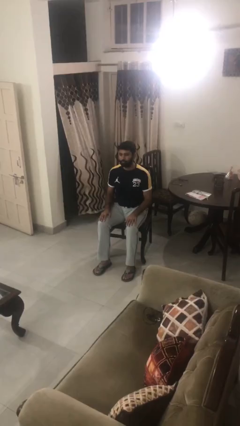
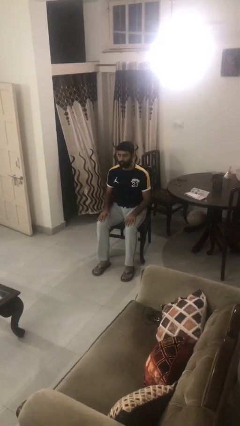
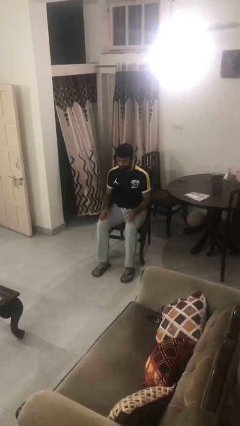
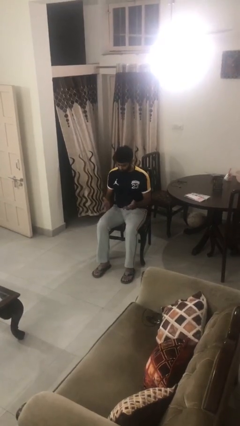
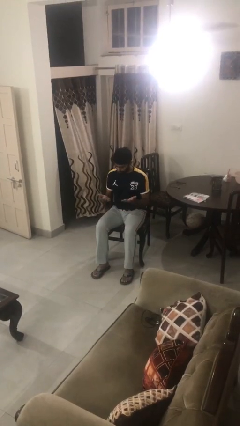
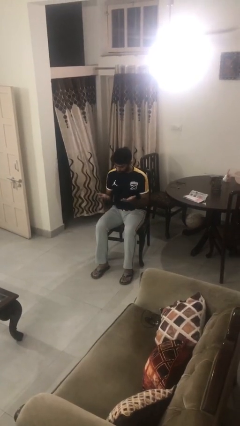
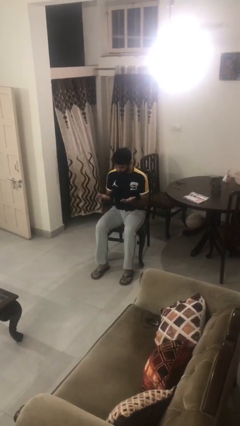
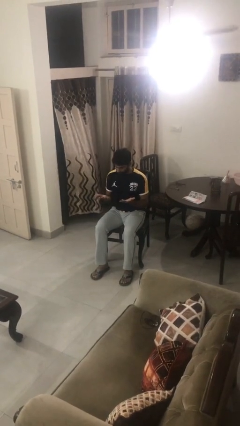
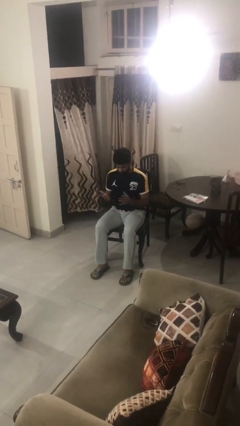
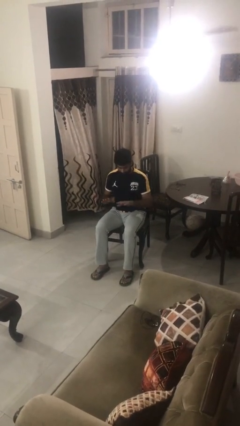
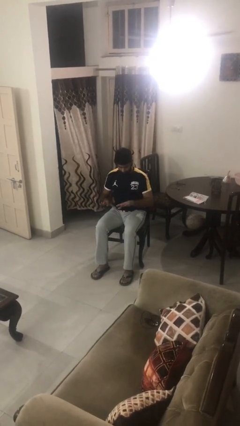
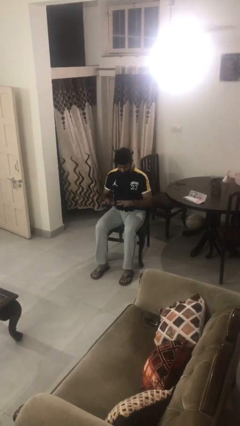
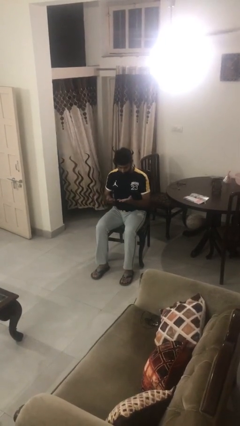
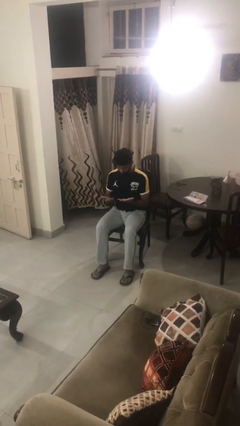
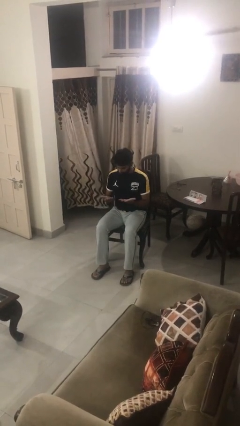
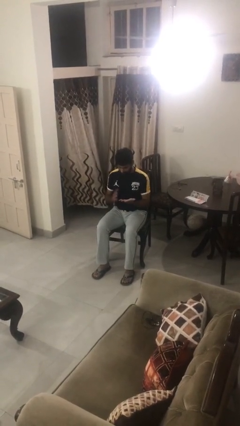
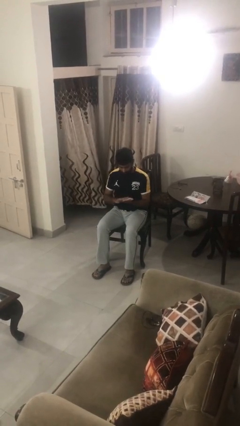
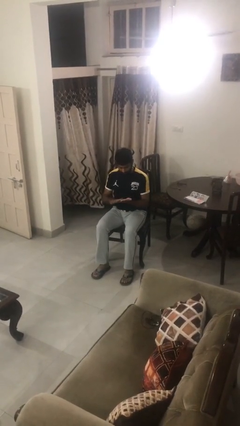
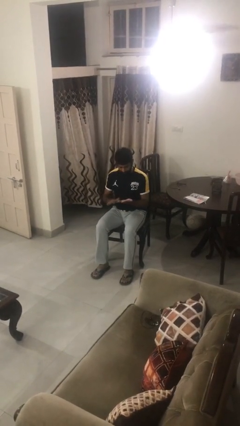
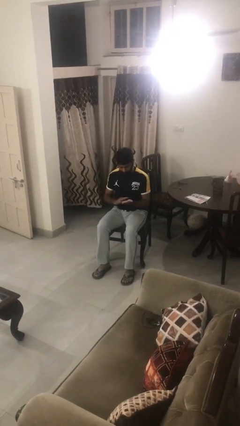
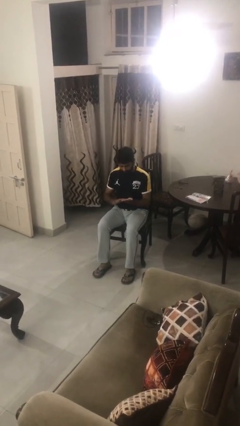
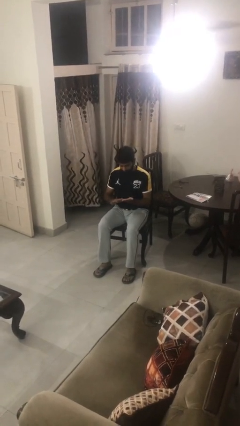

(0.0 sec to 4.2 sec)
person looks at hands in lap

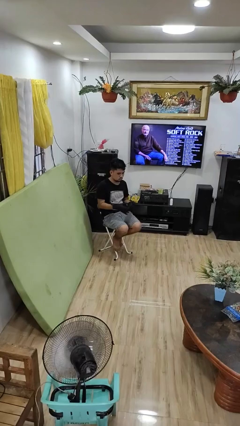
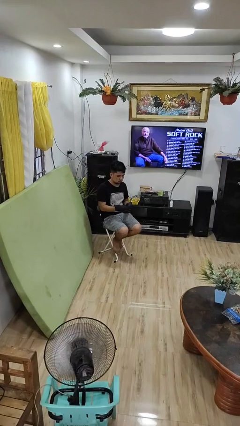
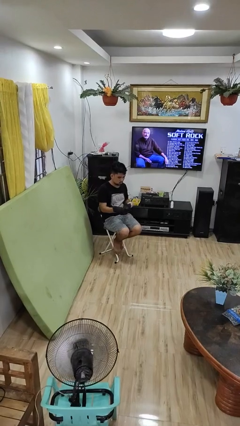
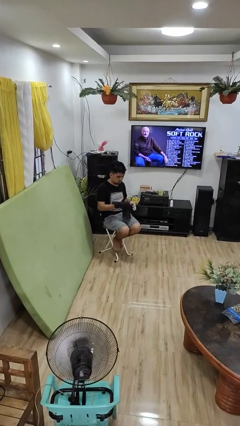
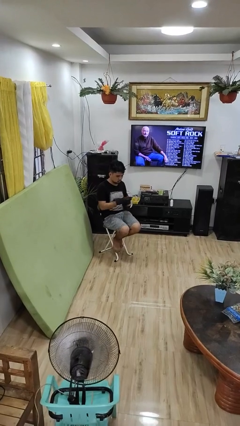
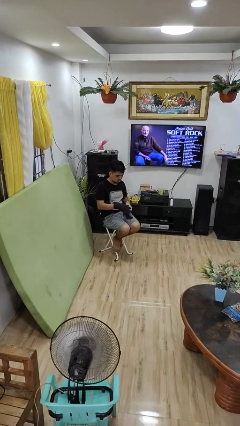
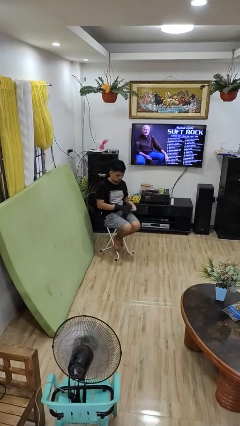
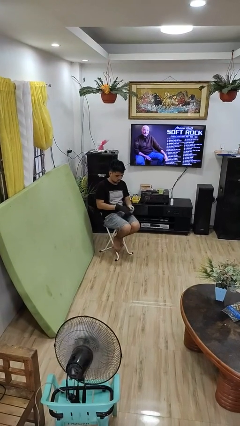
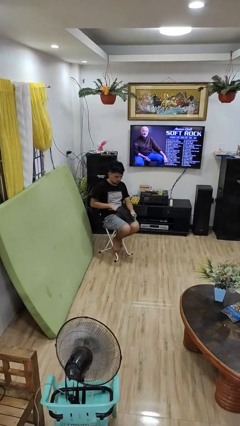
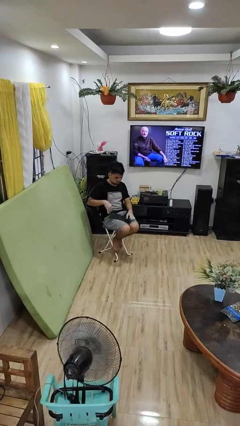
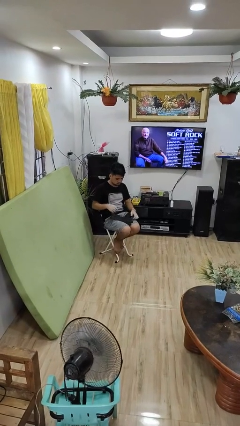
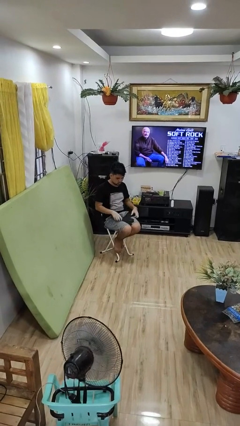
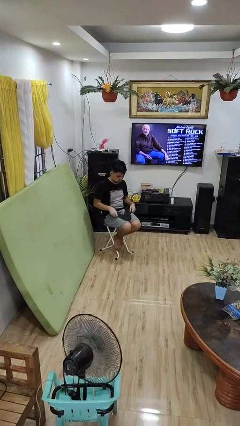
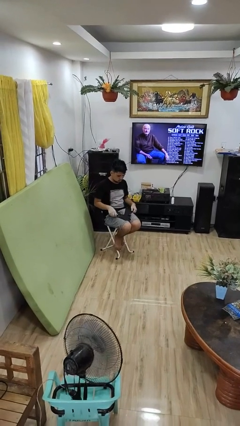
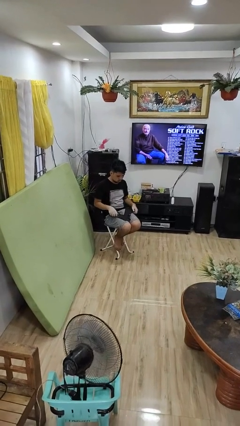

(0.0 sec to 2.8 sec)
person takes off gloves

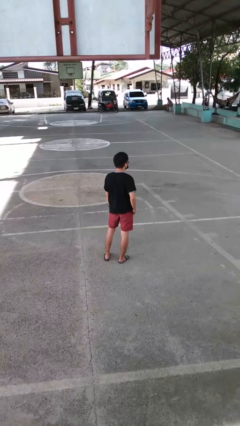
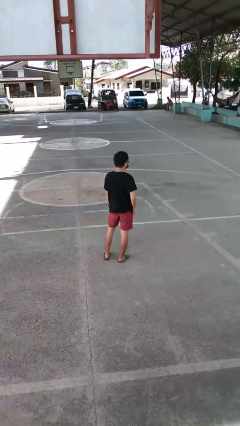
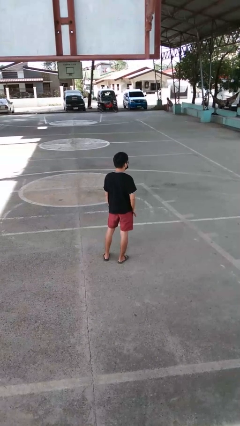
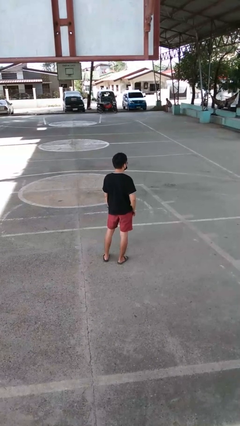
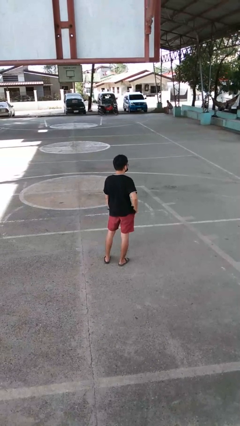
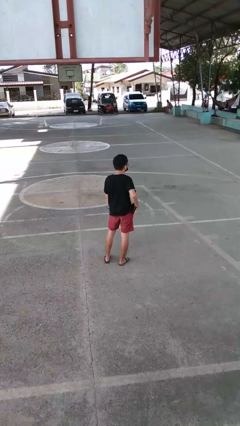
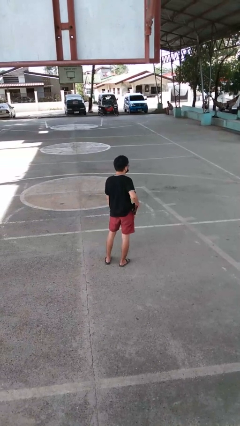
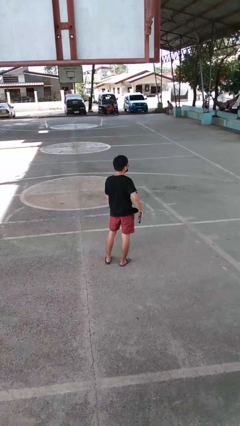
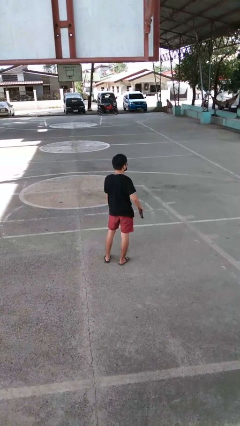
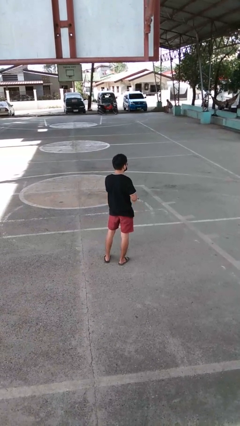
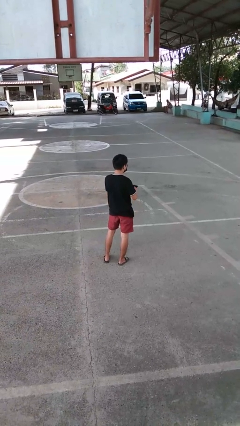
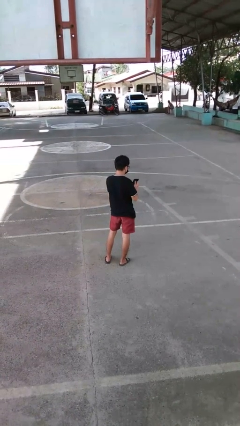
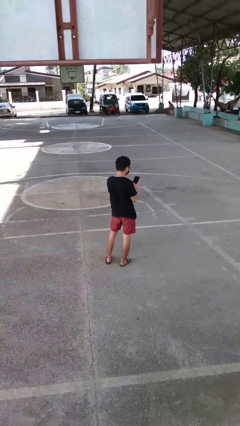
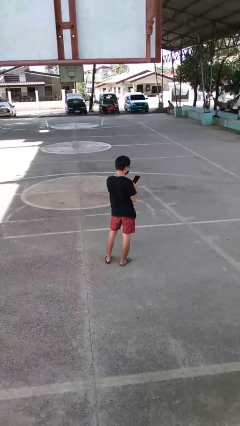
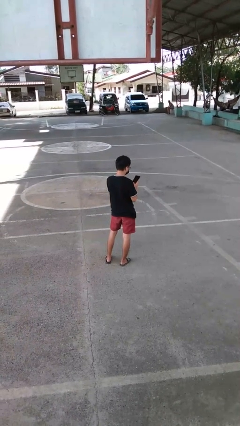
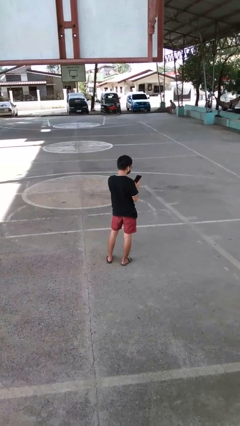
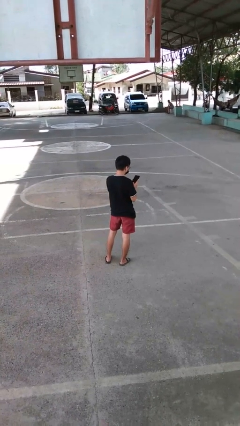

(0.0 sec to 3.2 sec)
person takes phone from pocket

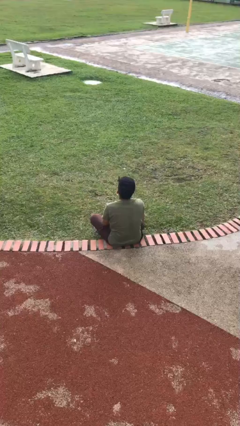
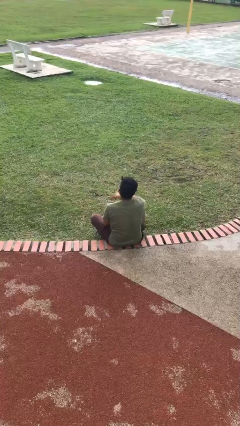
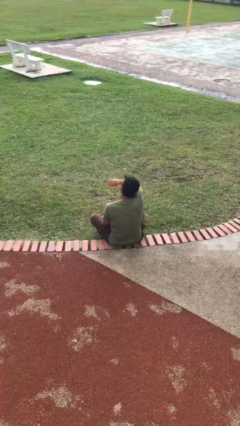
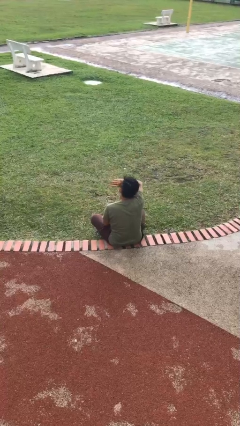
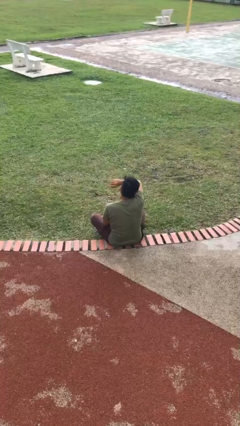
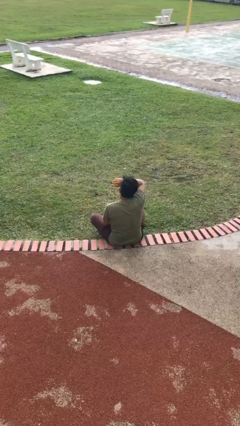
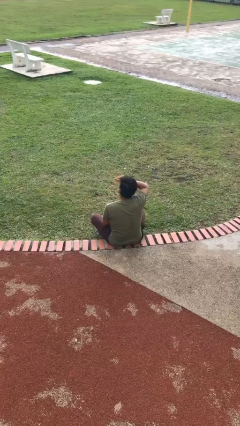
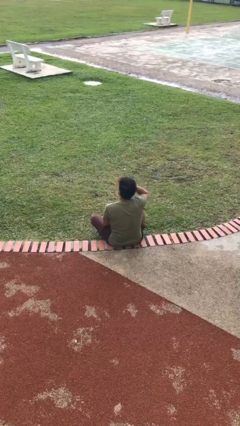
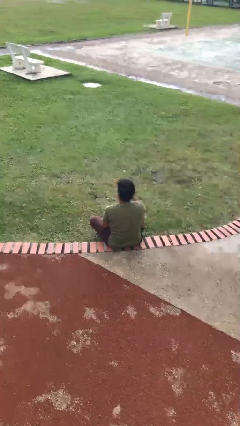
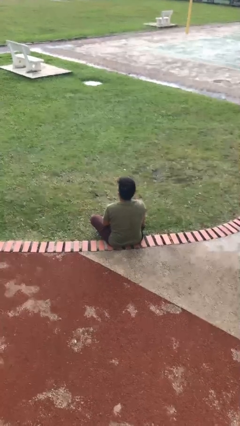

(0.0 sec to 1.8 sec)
person rubs eyes

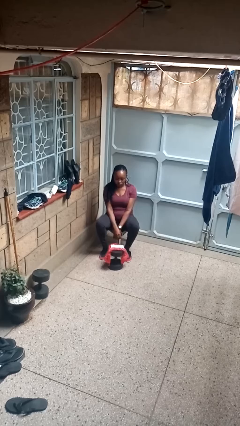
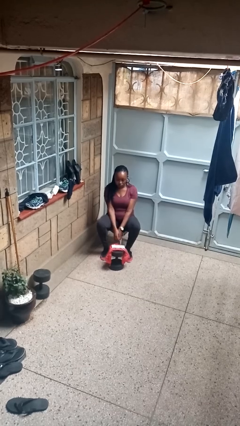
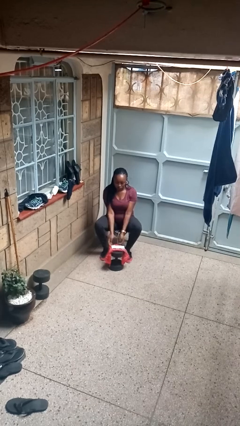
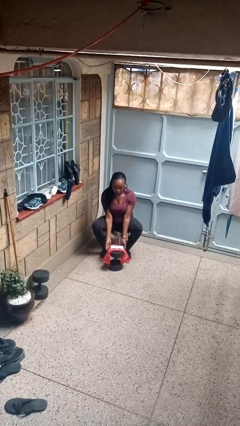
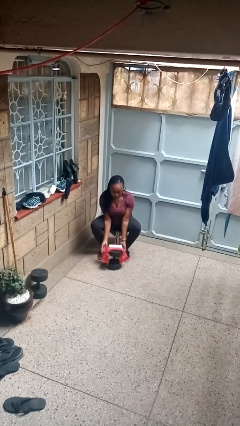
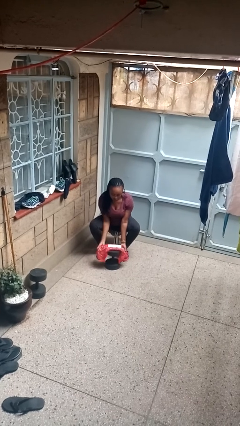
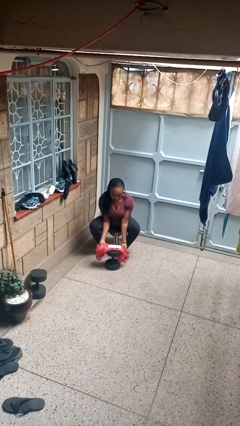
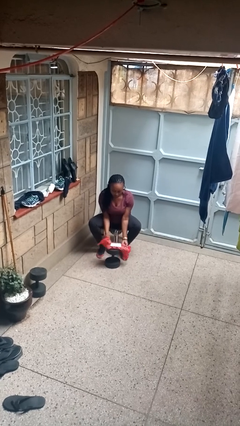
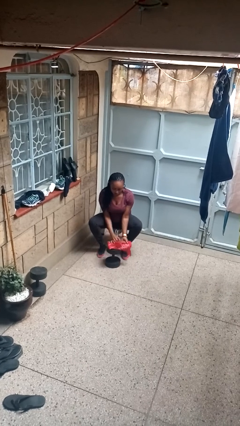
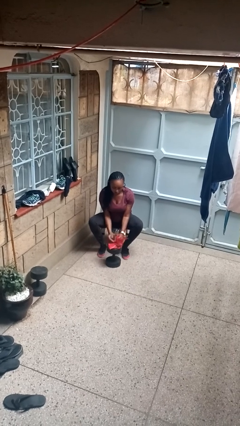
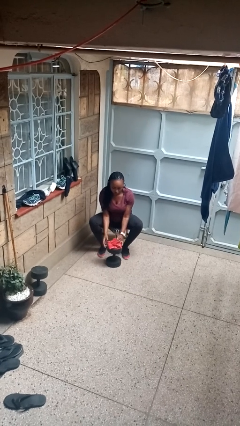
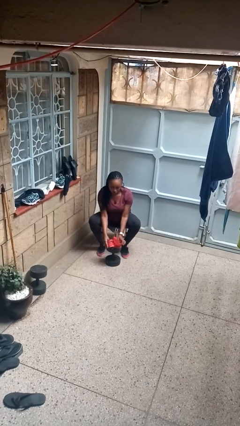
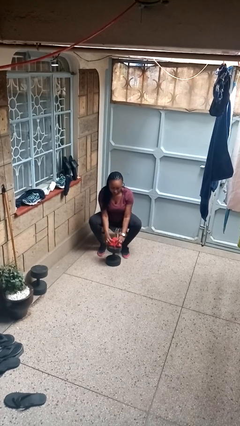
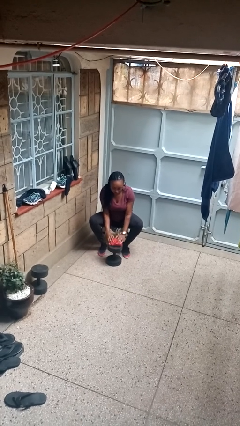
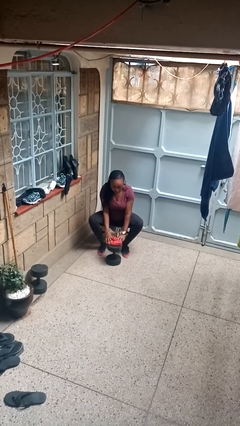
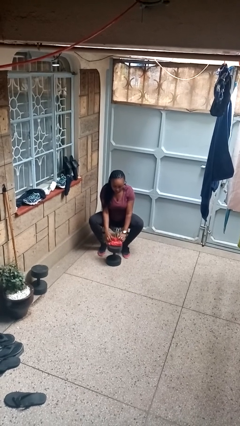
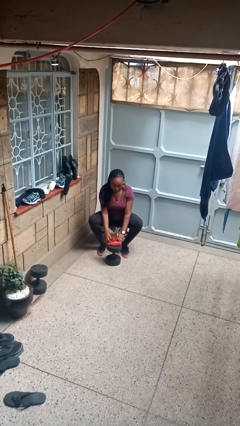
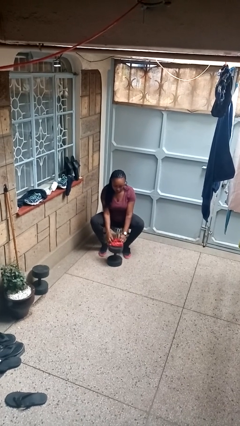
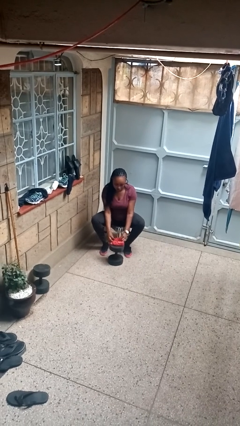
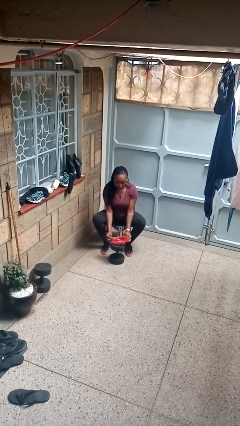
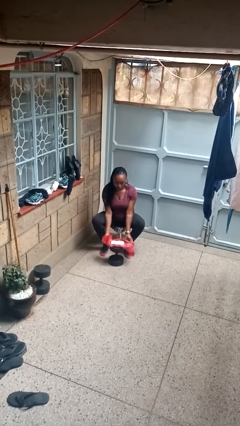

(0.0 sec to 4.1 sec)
person wraps box

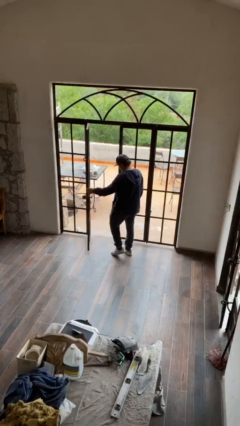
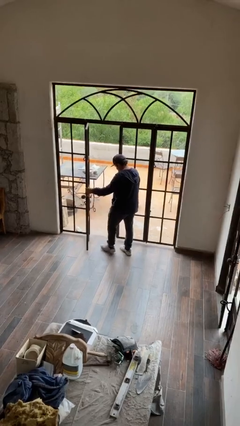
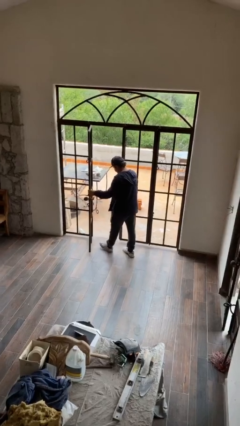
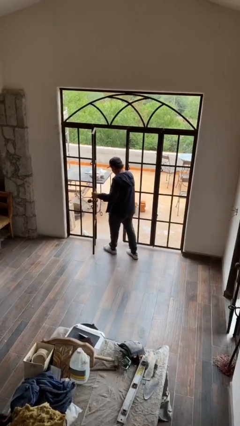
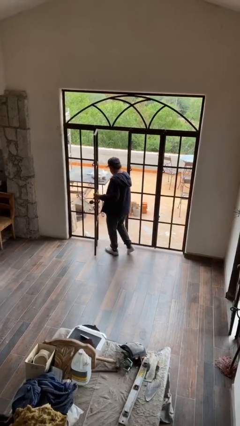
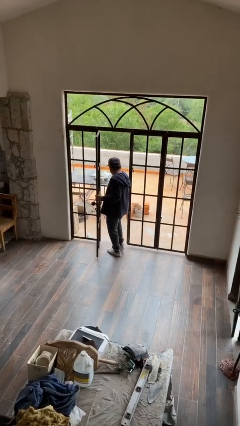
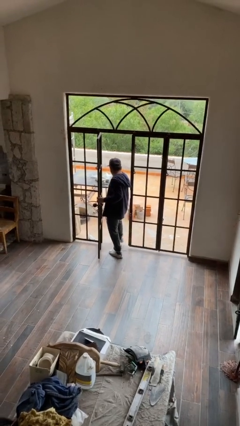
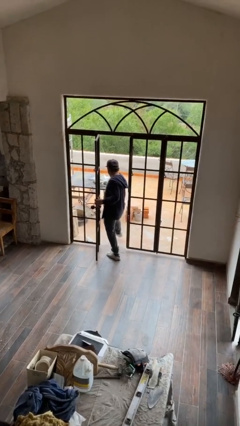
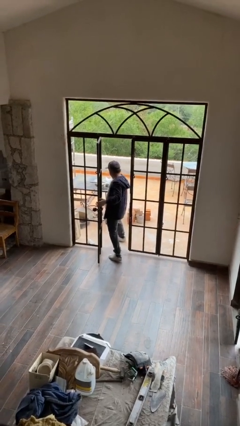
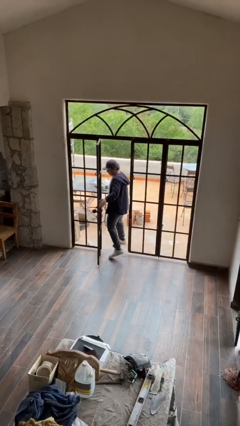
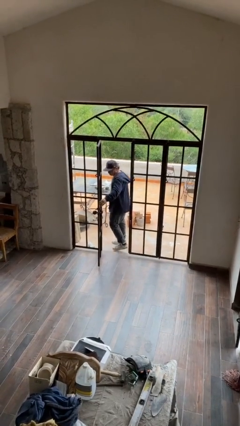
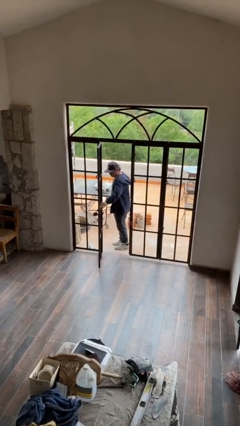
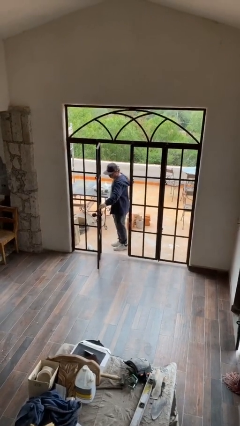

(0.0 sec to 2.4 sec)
person exits scene through structure
